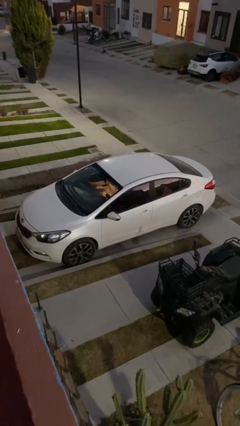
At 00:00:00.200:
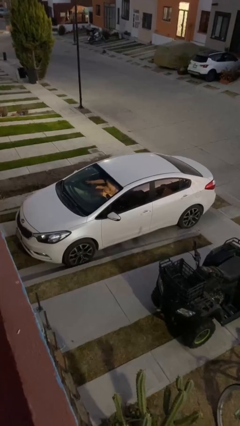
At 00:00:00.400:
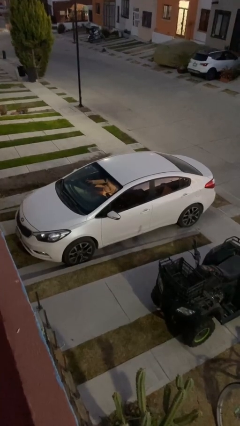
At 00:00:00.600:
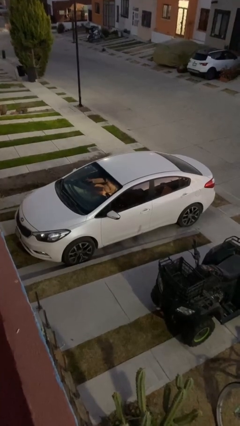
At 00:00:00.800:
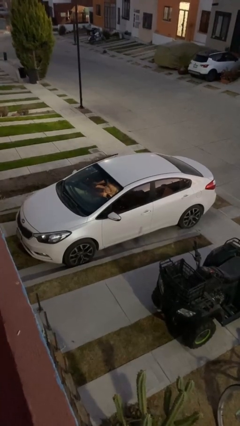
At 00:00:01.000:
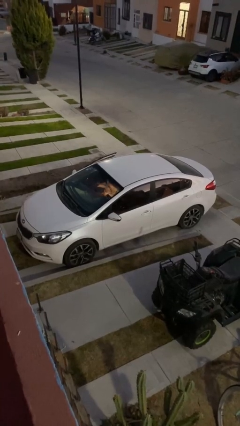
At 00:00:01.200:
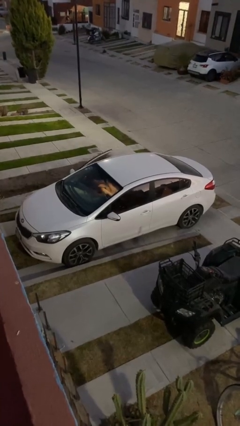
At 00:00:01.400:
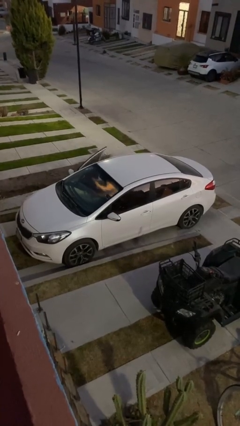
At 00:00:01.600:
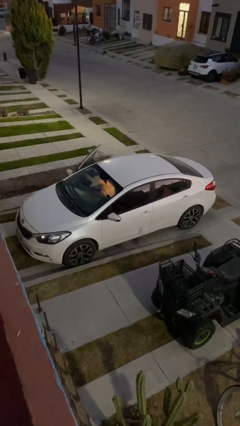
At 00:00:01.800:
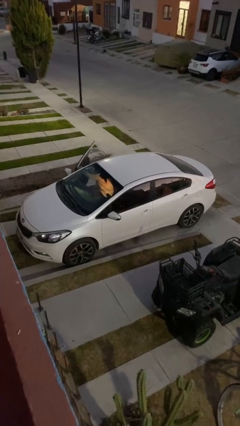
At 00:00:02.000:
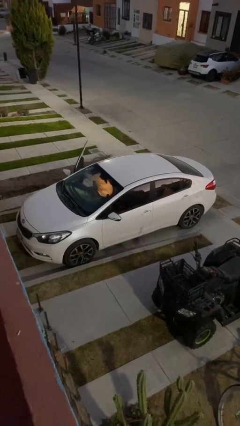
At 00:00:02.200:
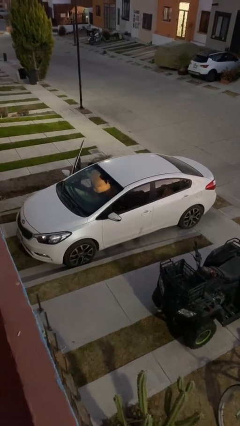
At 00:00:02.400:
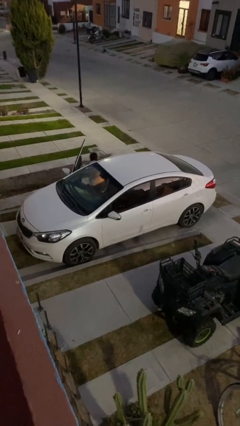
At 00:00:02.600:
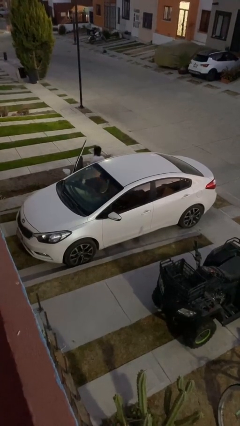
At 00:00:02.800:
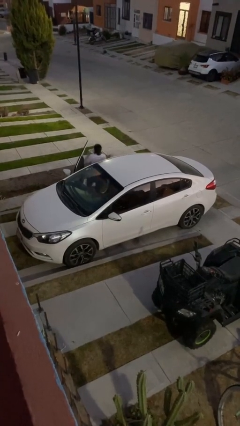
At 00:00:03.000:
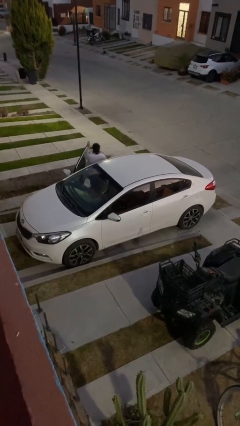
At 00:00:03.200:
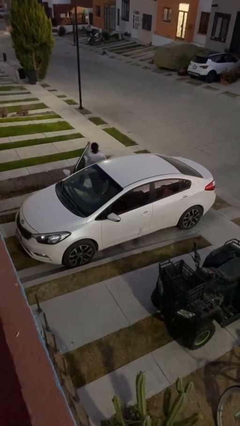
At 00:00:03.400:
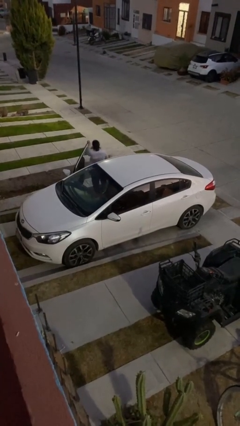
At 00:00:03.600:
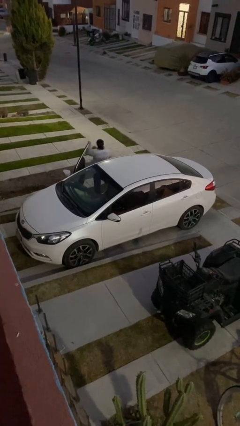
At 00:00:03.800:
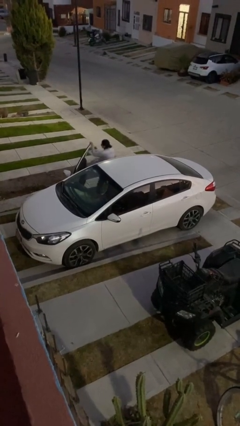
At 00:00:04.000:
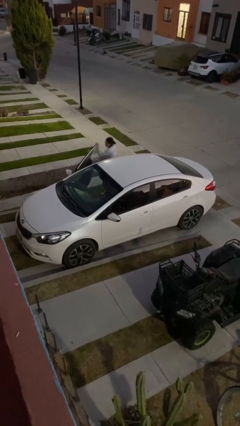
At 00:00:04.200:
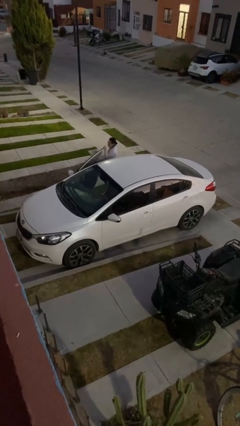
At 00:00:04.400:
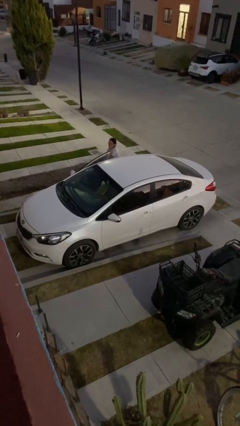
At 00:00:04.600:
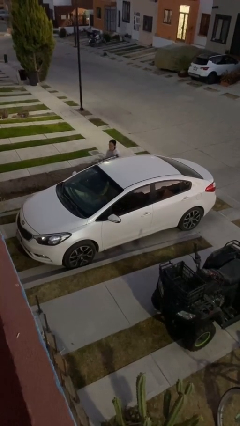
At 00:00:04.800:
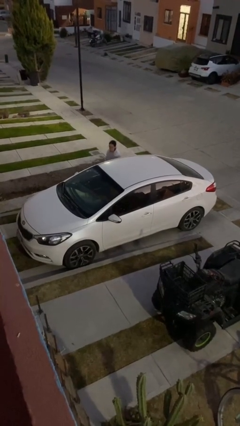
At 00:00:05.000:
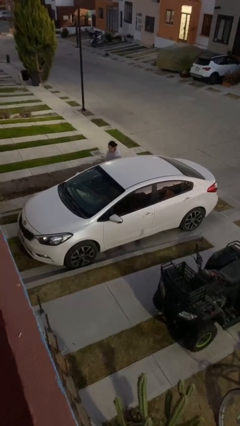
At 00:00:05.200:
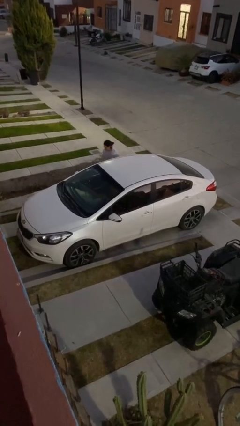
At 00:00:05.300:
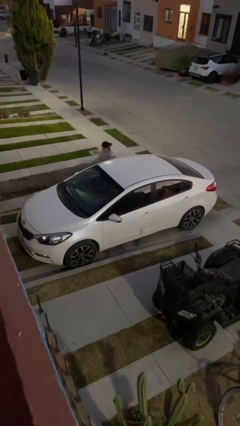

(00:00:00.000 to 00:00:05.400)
car drops off person

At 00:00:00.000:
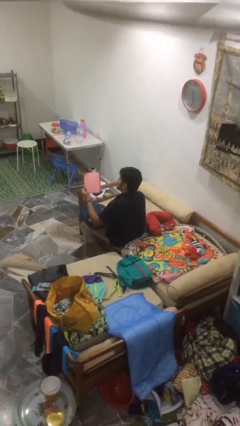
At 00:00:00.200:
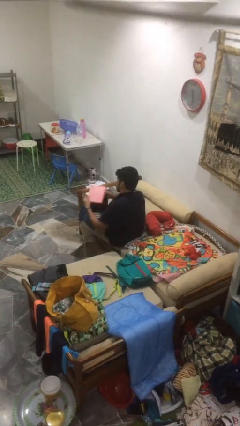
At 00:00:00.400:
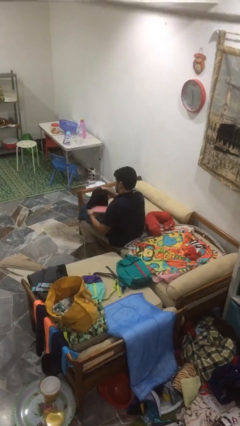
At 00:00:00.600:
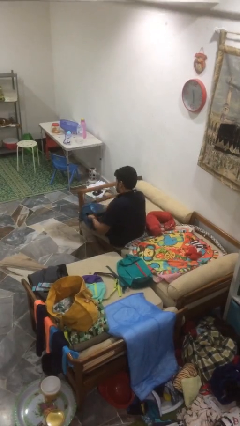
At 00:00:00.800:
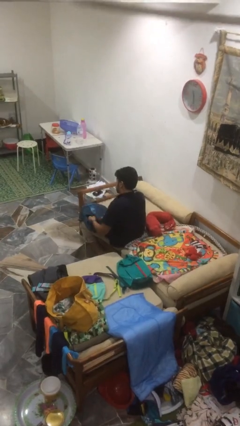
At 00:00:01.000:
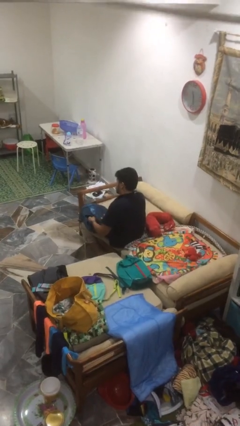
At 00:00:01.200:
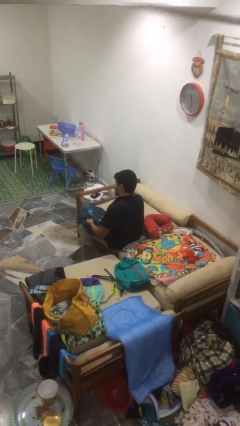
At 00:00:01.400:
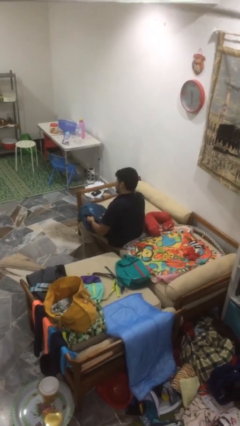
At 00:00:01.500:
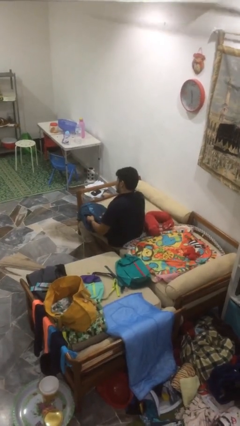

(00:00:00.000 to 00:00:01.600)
person puts object into bag

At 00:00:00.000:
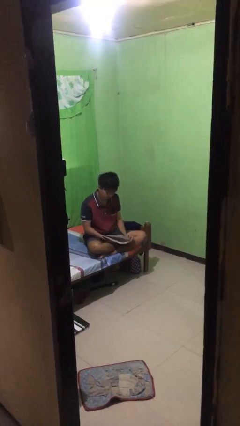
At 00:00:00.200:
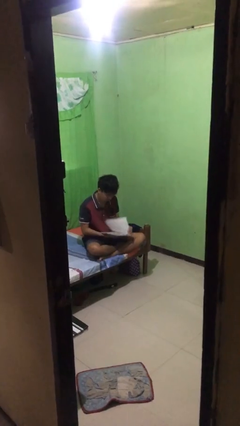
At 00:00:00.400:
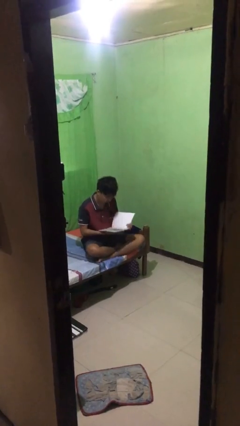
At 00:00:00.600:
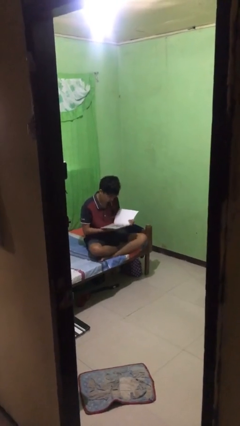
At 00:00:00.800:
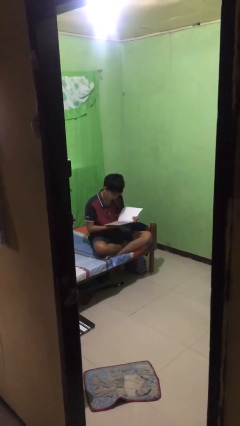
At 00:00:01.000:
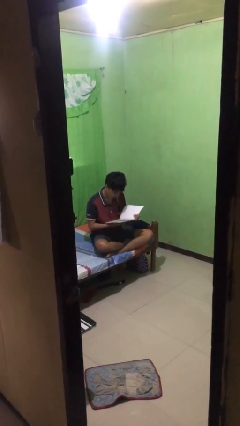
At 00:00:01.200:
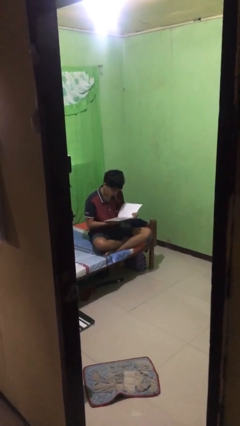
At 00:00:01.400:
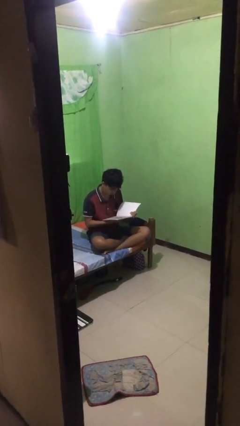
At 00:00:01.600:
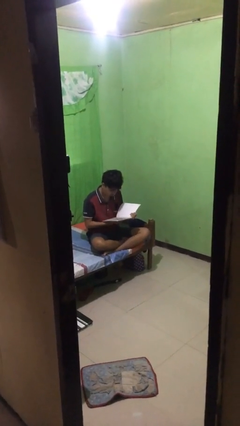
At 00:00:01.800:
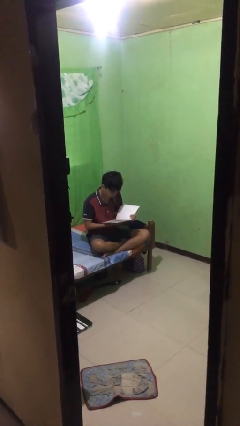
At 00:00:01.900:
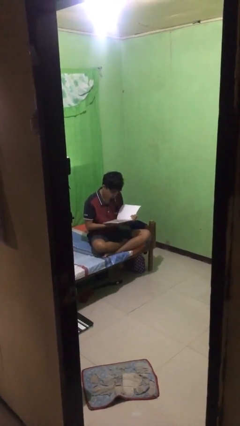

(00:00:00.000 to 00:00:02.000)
person reads document

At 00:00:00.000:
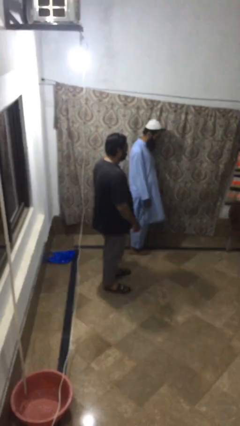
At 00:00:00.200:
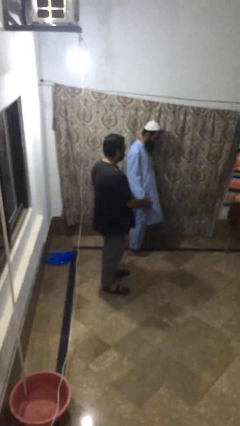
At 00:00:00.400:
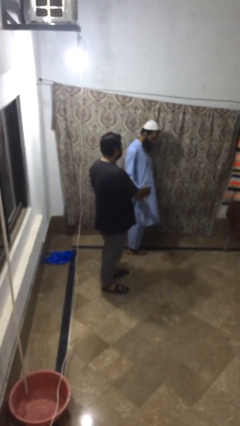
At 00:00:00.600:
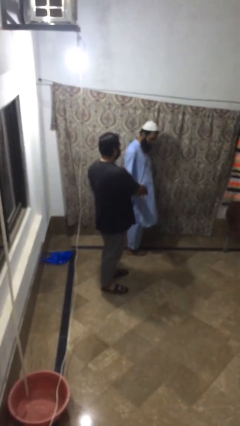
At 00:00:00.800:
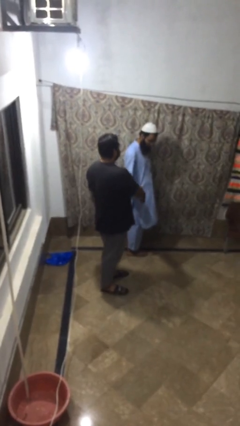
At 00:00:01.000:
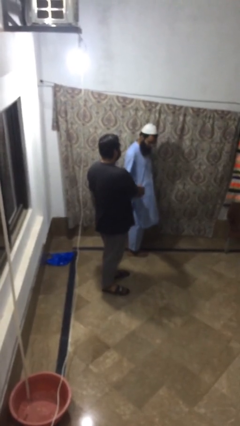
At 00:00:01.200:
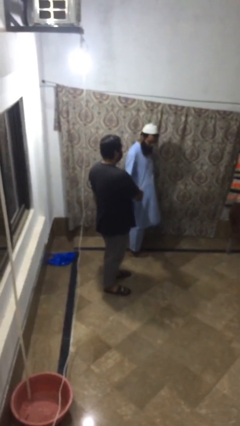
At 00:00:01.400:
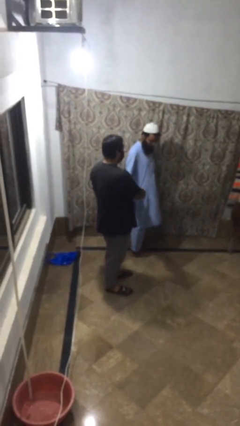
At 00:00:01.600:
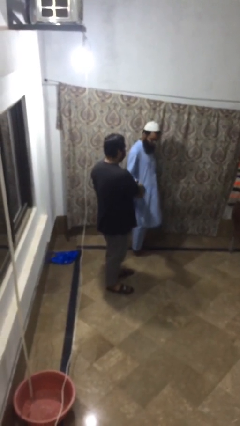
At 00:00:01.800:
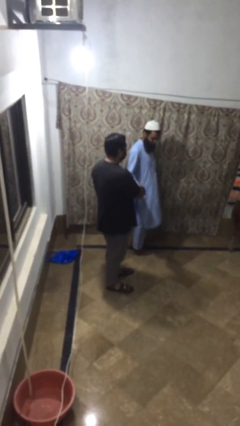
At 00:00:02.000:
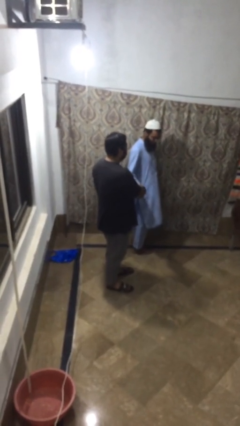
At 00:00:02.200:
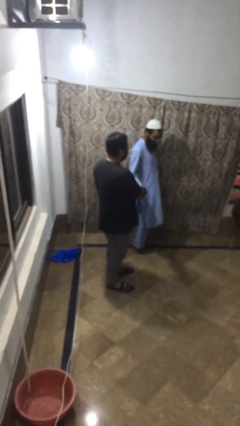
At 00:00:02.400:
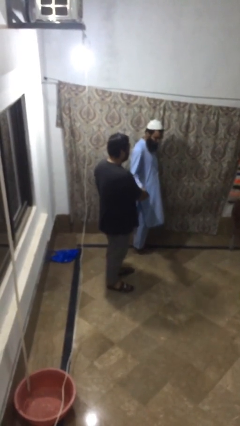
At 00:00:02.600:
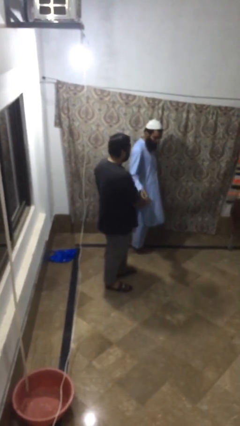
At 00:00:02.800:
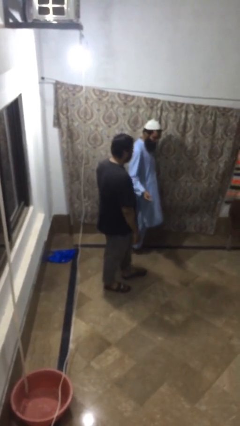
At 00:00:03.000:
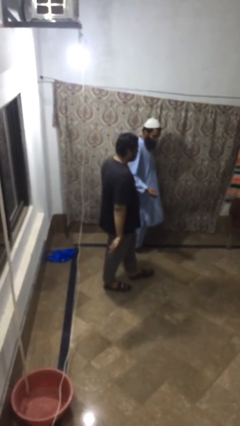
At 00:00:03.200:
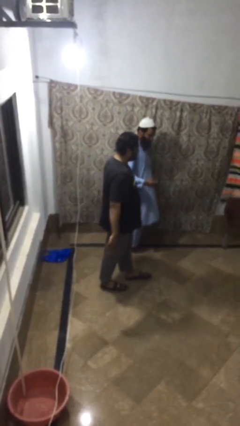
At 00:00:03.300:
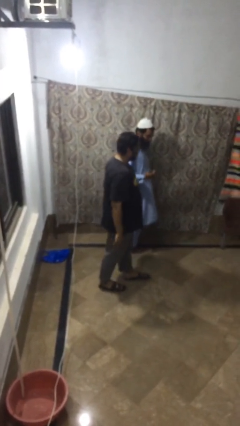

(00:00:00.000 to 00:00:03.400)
person shakes hand

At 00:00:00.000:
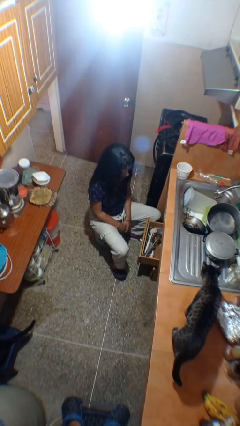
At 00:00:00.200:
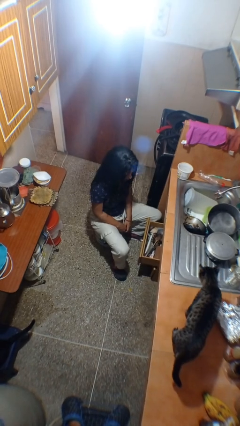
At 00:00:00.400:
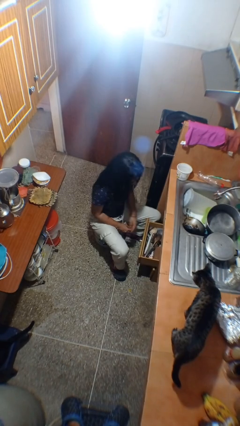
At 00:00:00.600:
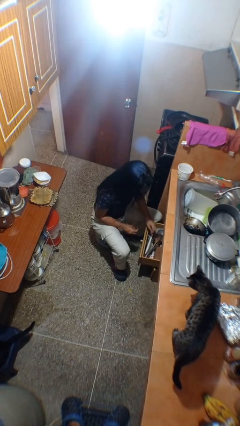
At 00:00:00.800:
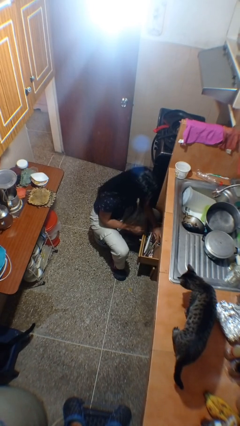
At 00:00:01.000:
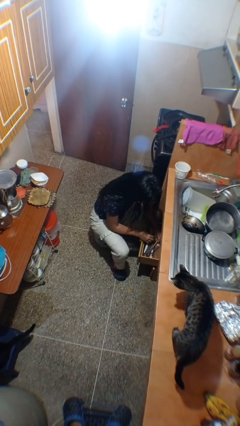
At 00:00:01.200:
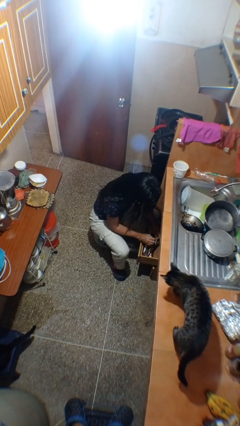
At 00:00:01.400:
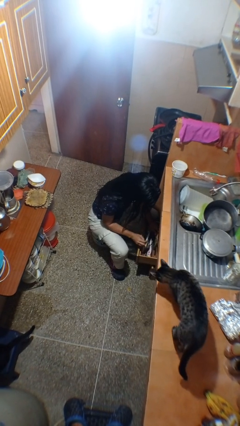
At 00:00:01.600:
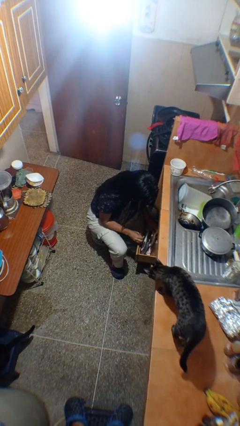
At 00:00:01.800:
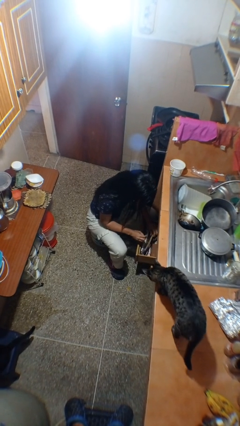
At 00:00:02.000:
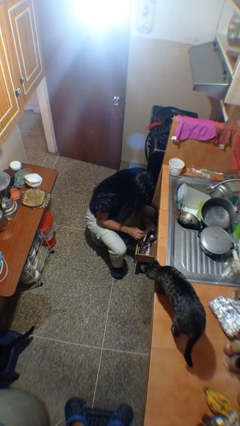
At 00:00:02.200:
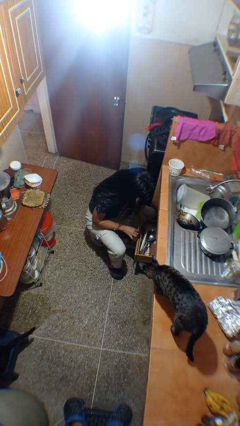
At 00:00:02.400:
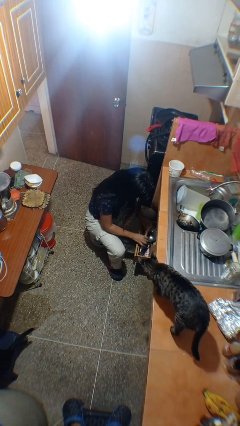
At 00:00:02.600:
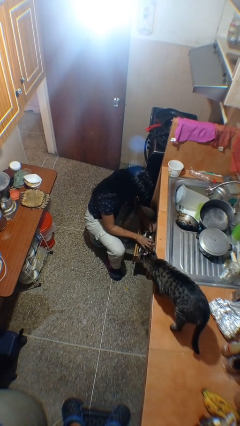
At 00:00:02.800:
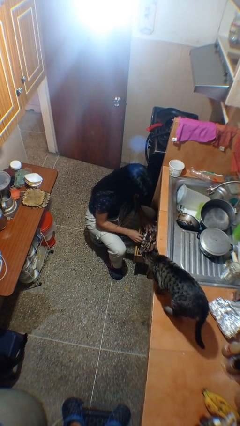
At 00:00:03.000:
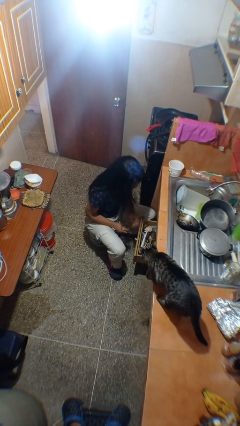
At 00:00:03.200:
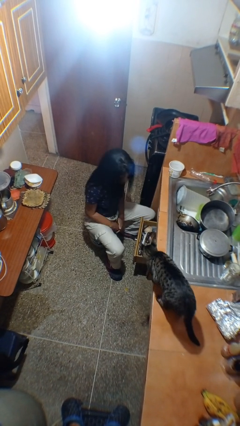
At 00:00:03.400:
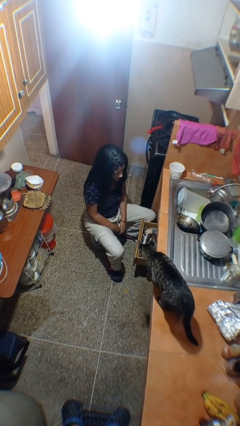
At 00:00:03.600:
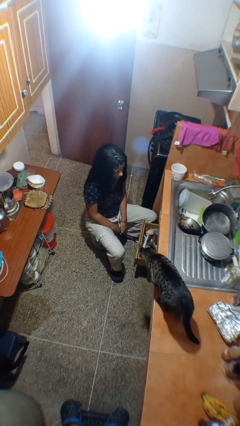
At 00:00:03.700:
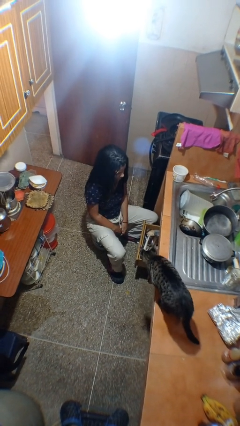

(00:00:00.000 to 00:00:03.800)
person searches in kitchen drawer

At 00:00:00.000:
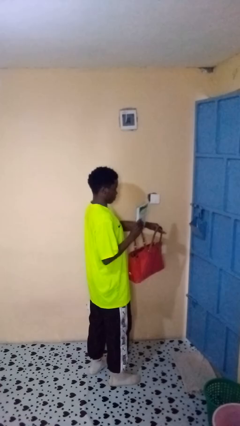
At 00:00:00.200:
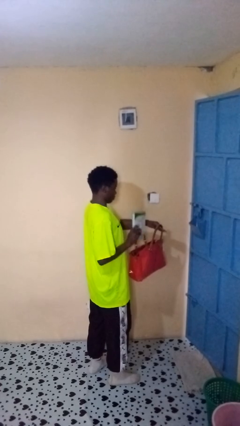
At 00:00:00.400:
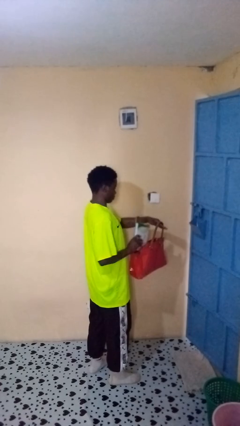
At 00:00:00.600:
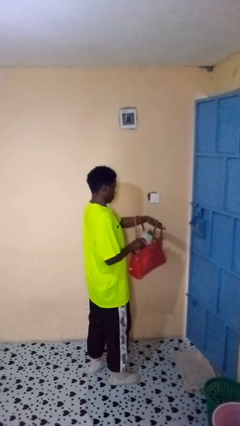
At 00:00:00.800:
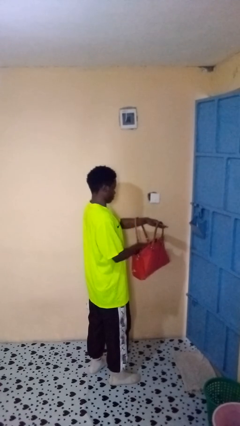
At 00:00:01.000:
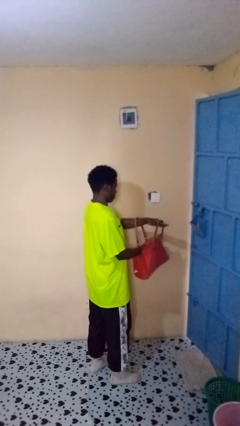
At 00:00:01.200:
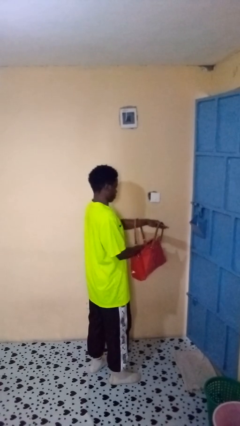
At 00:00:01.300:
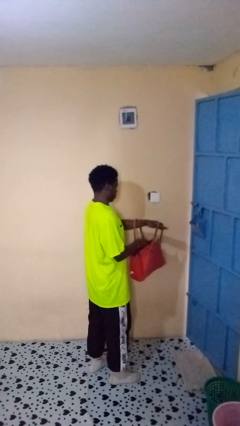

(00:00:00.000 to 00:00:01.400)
person puts object into purse
